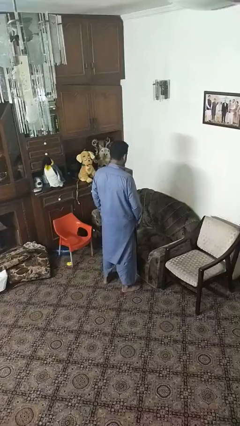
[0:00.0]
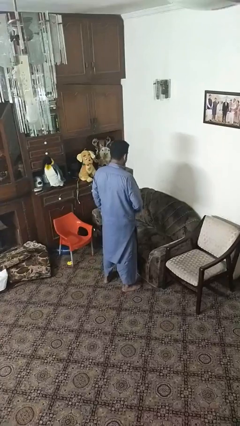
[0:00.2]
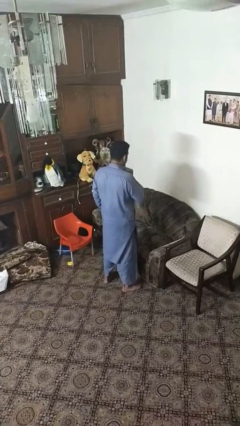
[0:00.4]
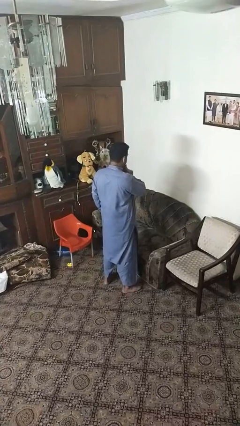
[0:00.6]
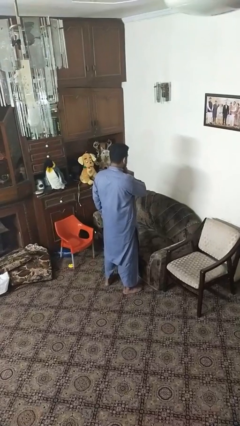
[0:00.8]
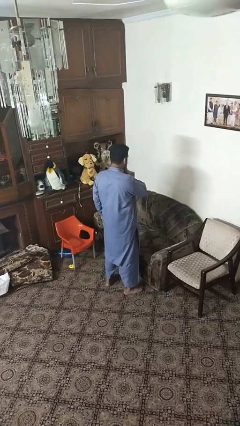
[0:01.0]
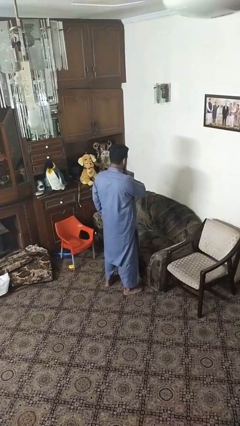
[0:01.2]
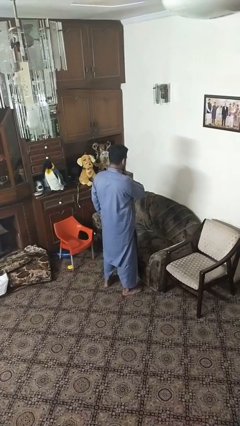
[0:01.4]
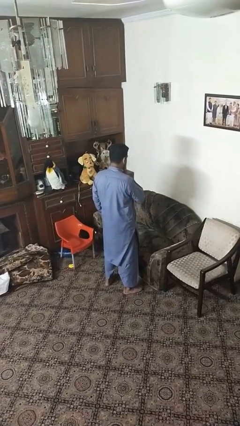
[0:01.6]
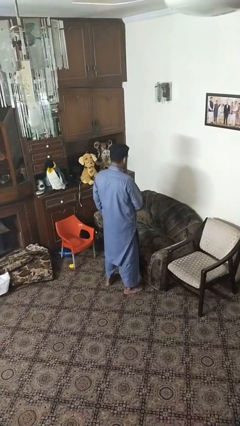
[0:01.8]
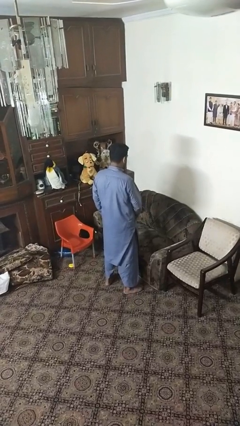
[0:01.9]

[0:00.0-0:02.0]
person strokes chin

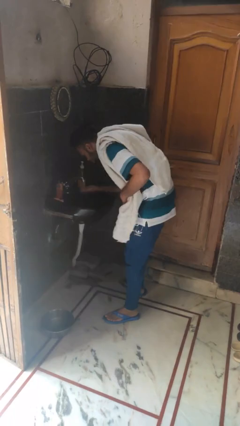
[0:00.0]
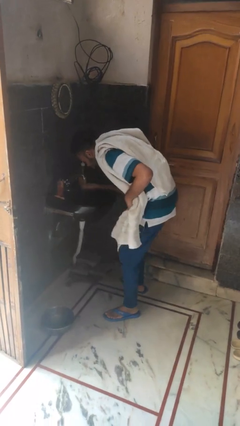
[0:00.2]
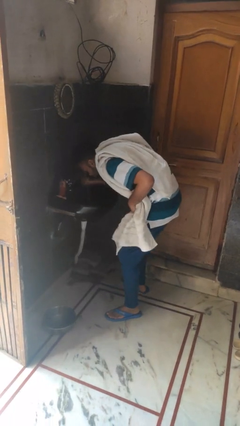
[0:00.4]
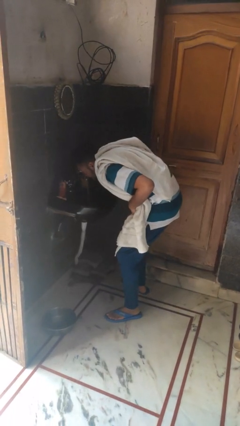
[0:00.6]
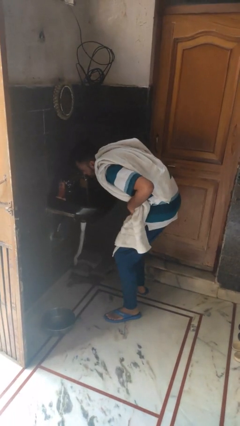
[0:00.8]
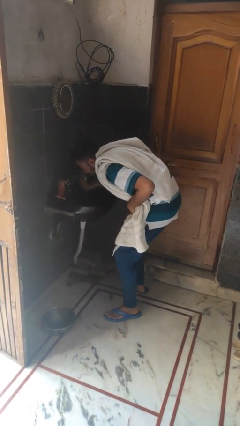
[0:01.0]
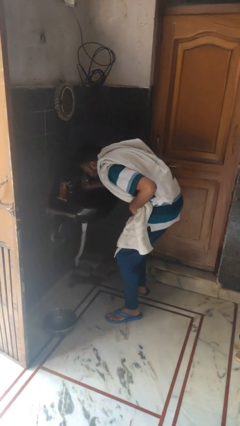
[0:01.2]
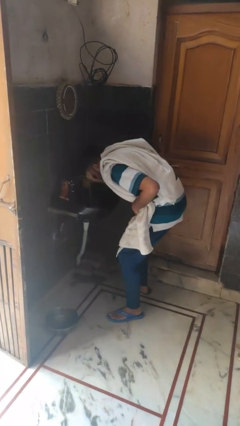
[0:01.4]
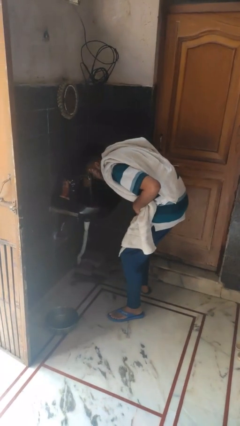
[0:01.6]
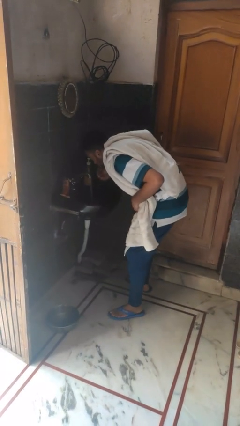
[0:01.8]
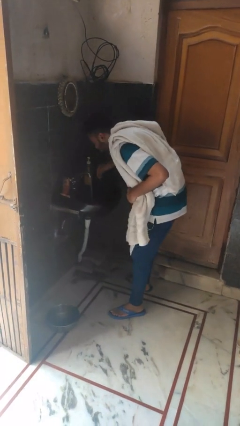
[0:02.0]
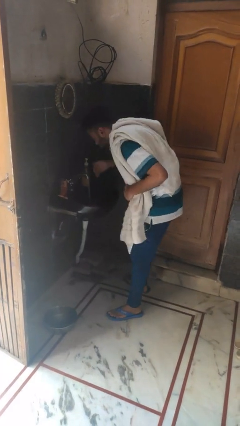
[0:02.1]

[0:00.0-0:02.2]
person washes face

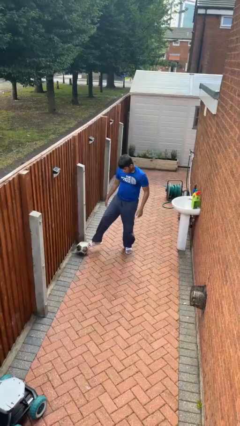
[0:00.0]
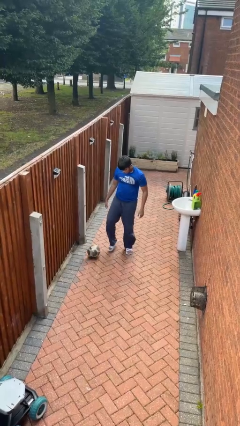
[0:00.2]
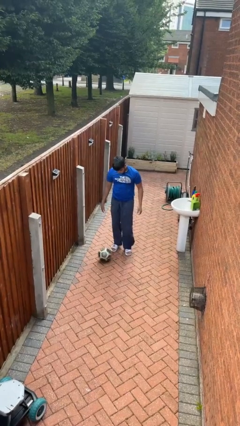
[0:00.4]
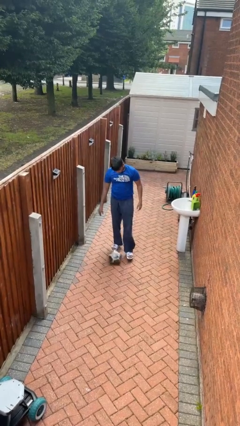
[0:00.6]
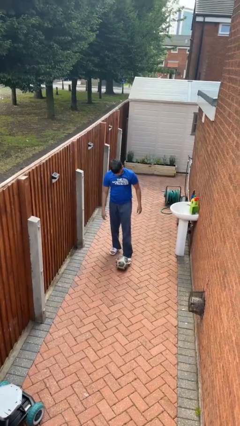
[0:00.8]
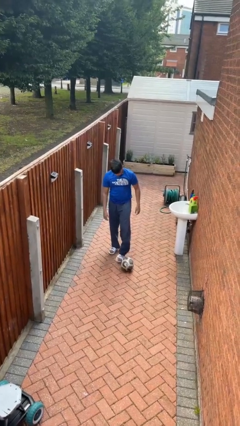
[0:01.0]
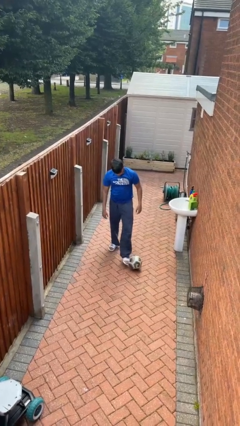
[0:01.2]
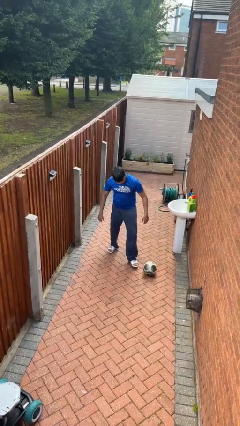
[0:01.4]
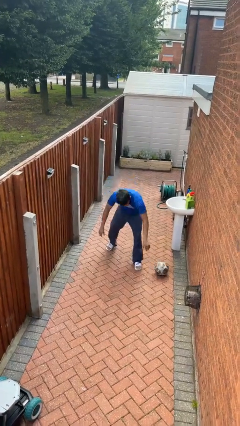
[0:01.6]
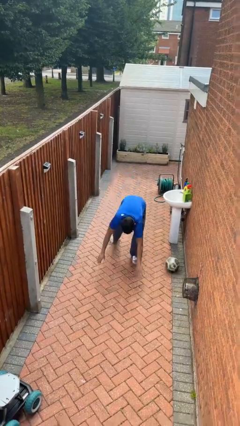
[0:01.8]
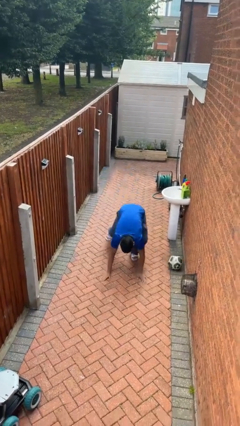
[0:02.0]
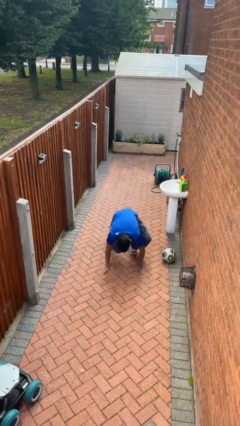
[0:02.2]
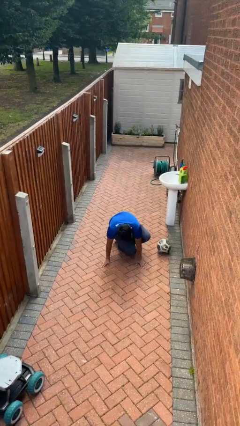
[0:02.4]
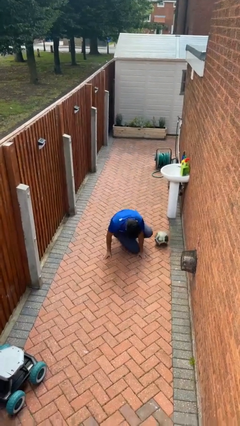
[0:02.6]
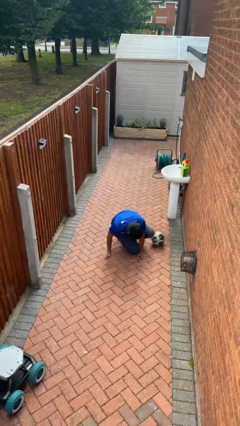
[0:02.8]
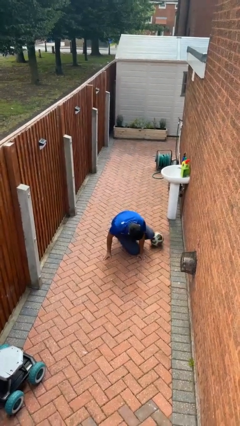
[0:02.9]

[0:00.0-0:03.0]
person trips on object on floor

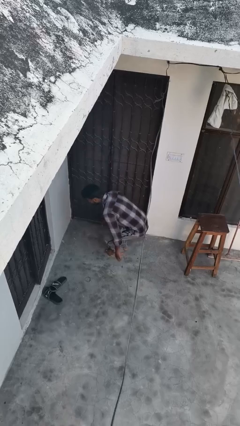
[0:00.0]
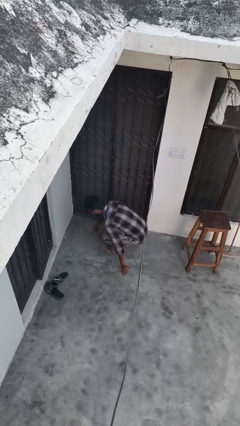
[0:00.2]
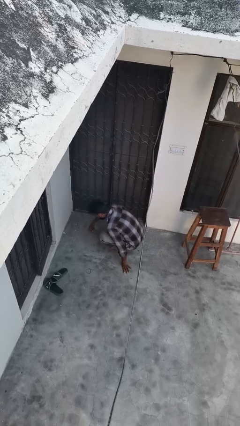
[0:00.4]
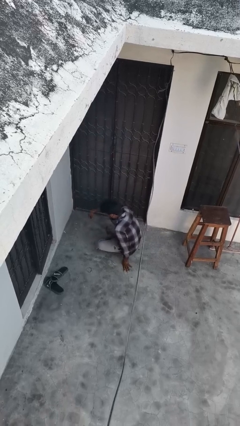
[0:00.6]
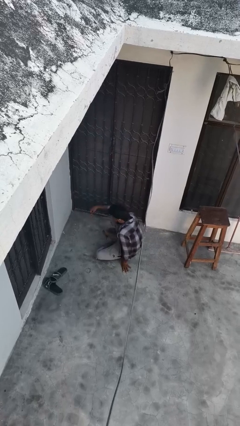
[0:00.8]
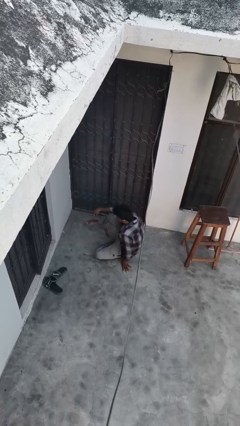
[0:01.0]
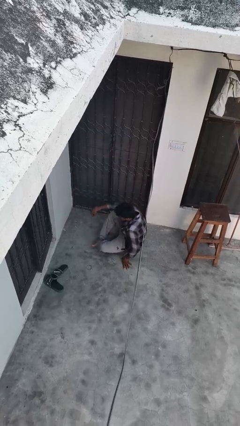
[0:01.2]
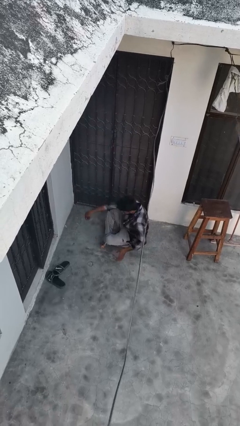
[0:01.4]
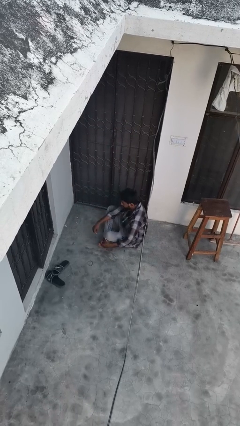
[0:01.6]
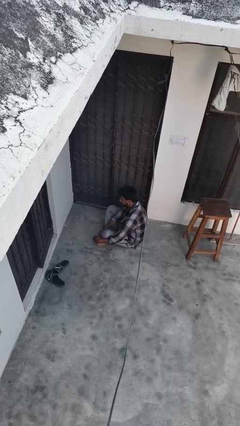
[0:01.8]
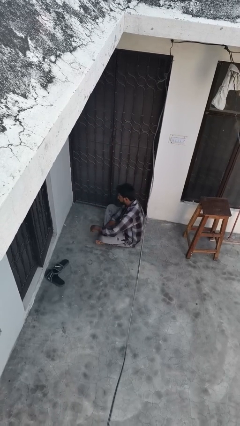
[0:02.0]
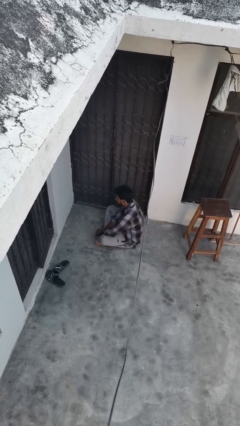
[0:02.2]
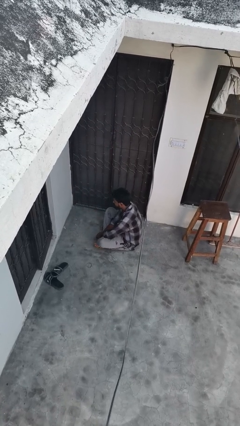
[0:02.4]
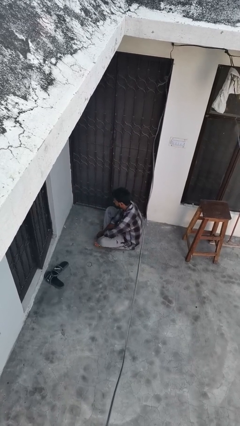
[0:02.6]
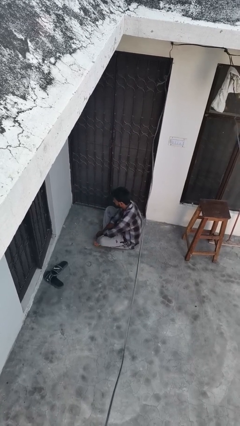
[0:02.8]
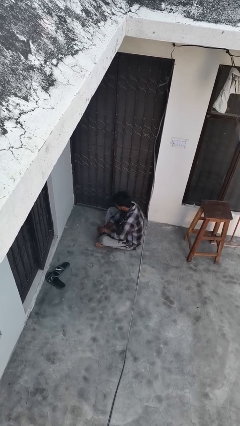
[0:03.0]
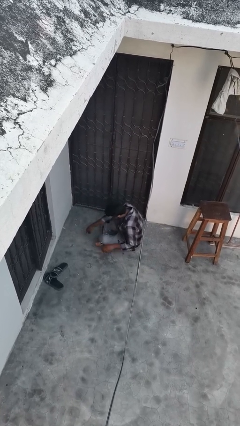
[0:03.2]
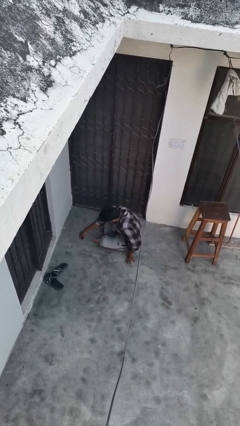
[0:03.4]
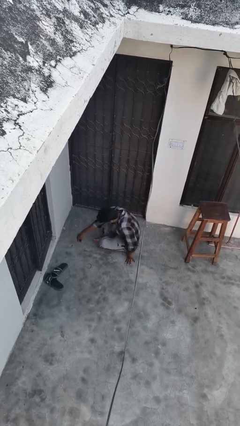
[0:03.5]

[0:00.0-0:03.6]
person sits crisscross

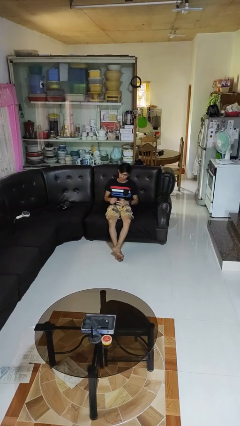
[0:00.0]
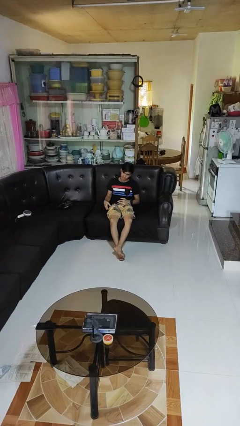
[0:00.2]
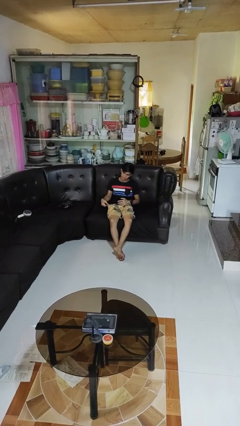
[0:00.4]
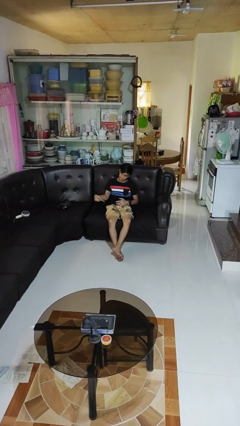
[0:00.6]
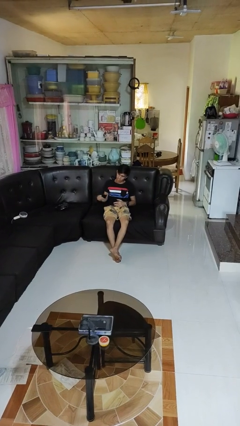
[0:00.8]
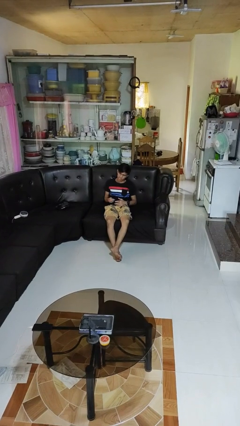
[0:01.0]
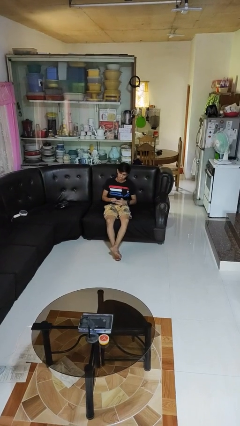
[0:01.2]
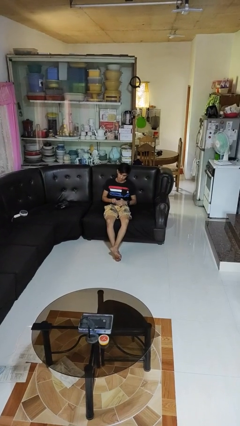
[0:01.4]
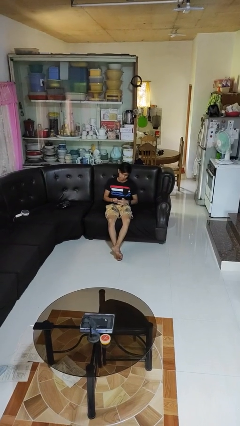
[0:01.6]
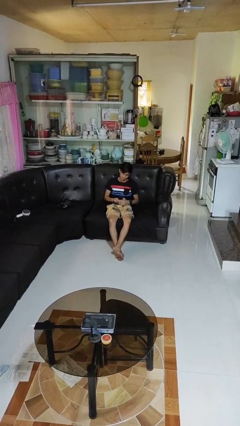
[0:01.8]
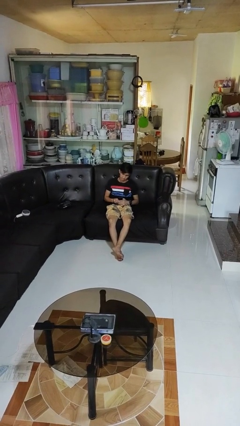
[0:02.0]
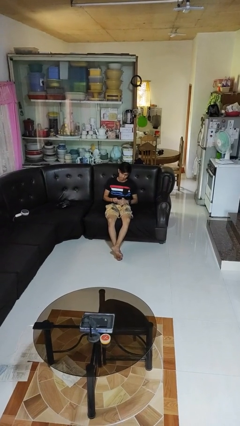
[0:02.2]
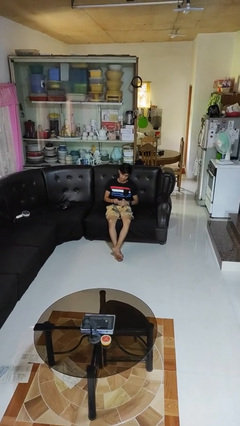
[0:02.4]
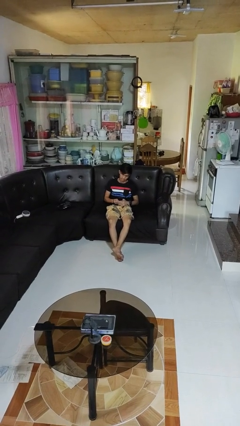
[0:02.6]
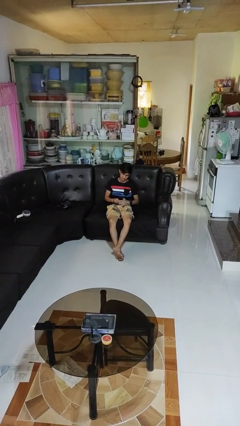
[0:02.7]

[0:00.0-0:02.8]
person takes phone from pocket

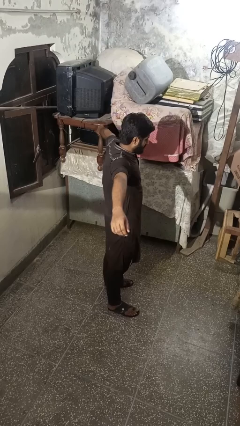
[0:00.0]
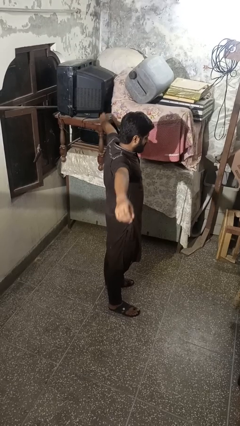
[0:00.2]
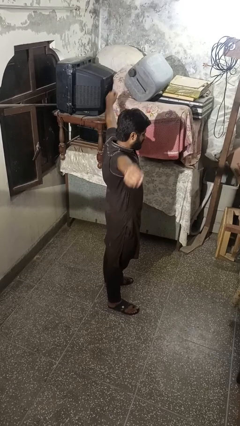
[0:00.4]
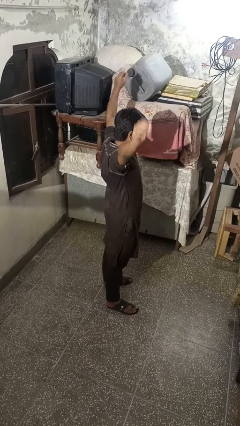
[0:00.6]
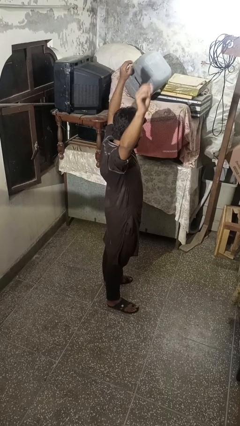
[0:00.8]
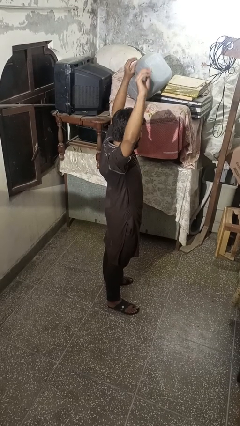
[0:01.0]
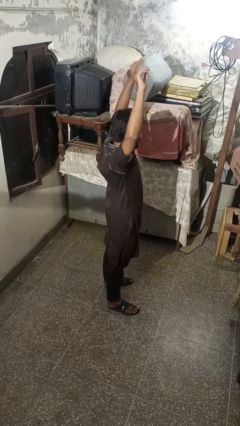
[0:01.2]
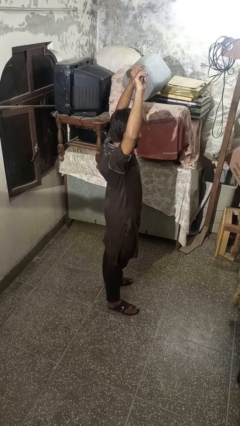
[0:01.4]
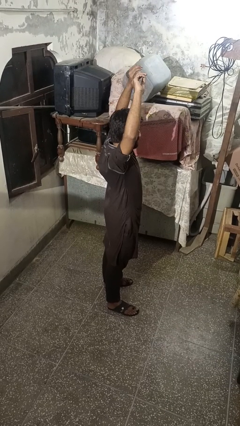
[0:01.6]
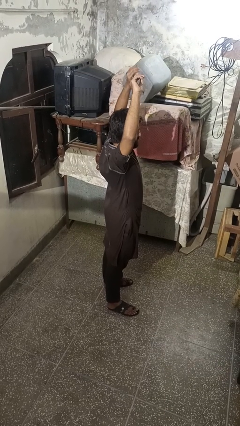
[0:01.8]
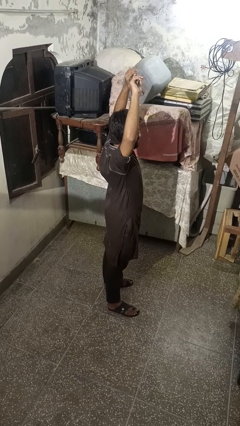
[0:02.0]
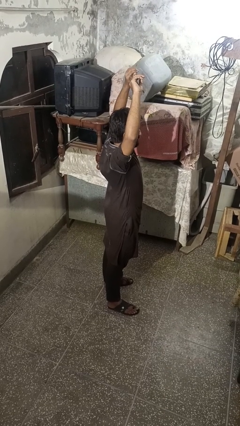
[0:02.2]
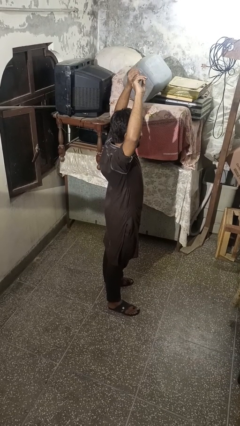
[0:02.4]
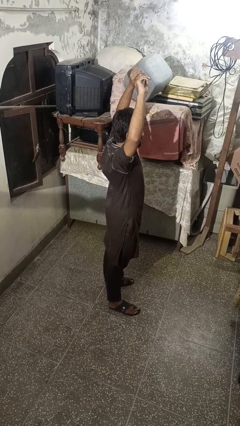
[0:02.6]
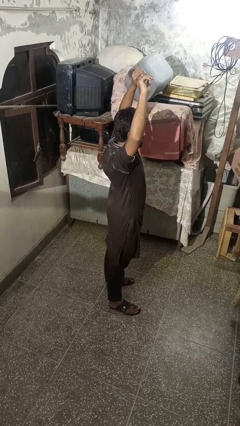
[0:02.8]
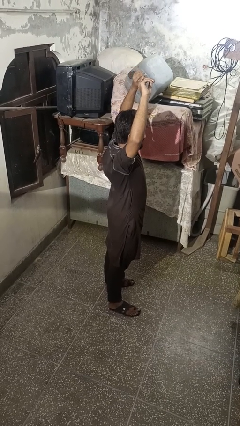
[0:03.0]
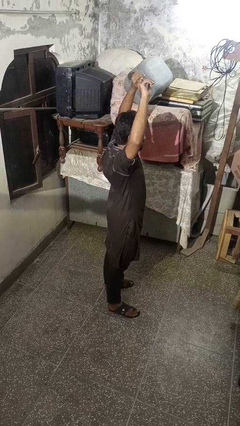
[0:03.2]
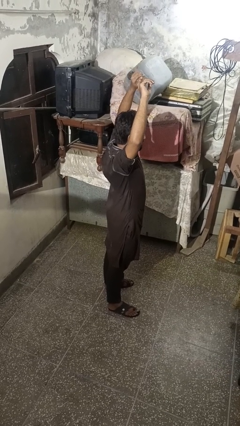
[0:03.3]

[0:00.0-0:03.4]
person stretches arms over head

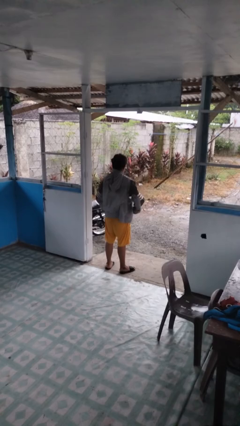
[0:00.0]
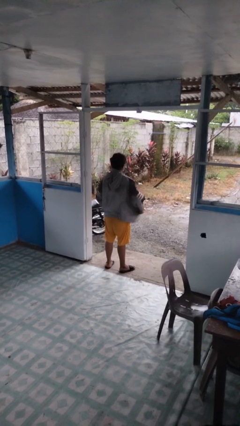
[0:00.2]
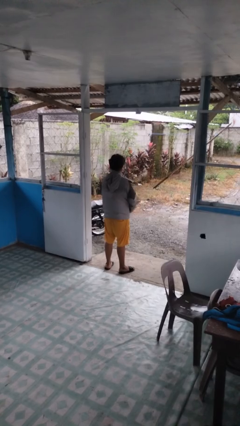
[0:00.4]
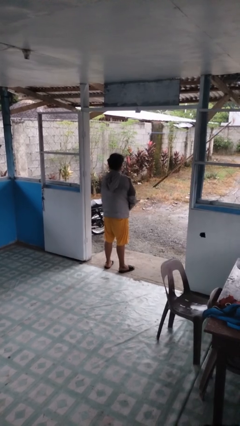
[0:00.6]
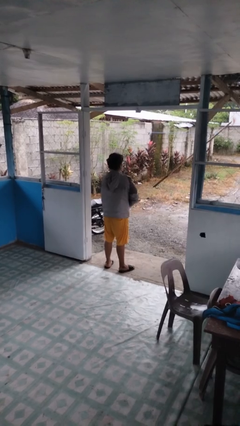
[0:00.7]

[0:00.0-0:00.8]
person zips up jacket
